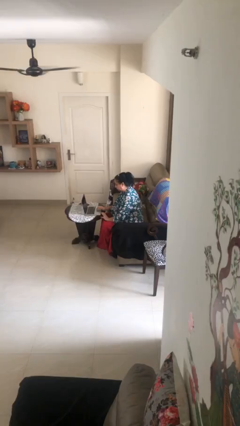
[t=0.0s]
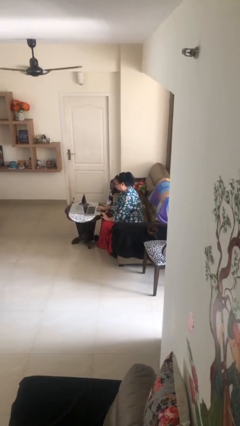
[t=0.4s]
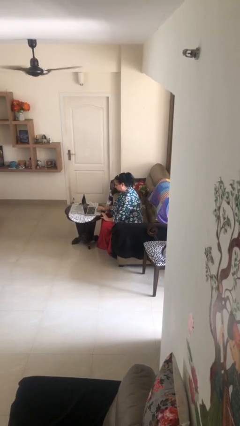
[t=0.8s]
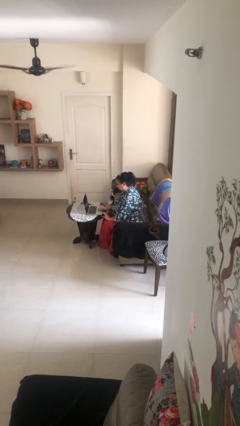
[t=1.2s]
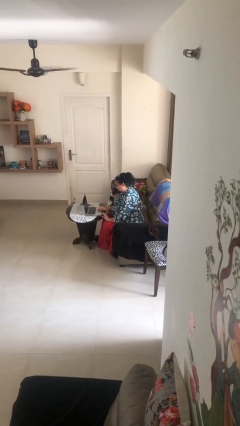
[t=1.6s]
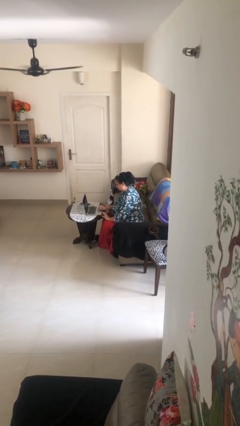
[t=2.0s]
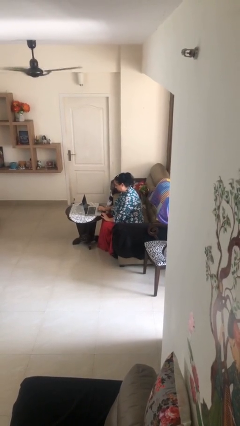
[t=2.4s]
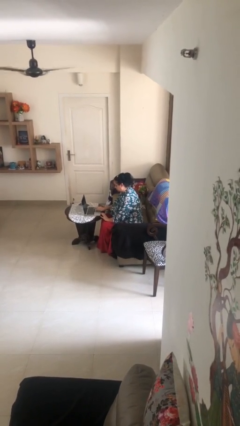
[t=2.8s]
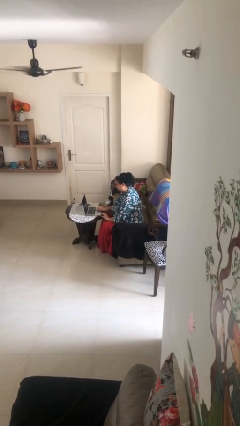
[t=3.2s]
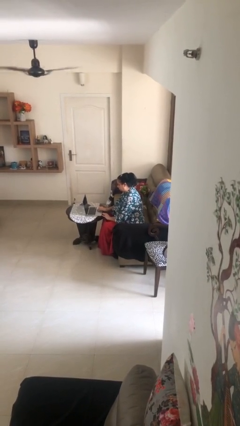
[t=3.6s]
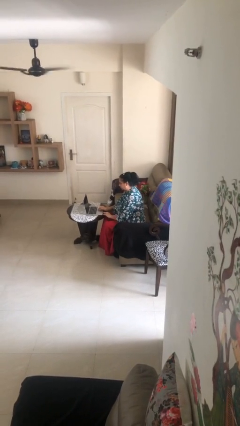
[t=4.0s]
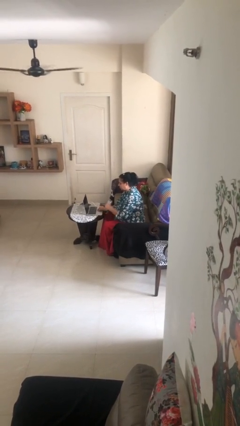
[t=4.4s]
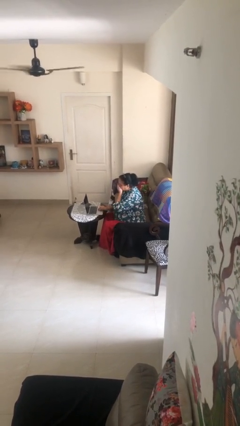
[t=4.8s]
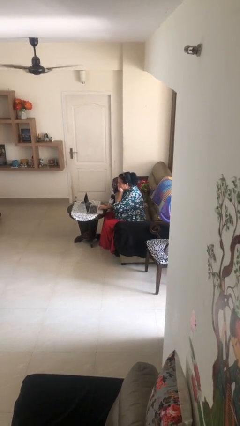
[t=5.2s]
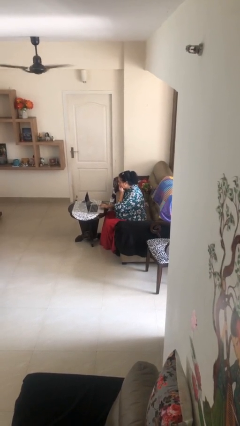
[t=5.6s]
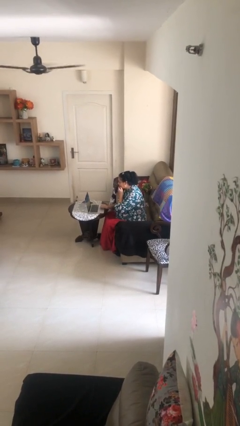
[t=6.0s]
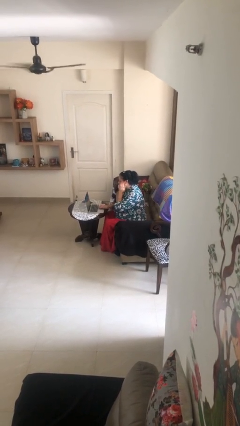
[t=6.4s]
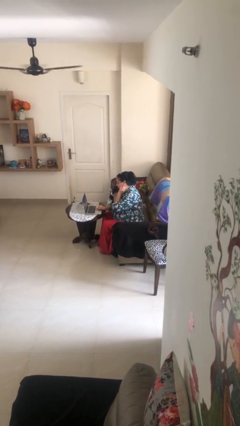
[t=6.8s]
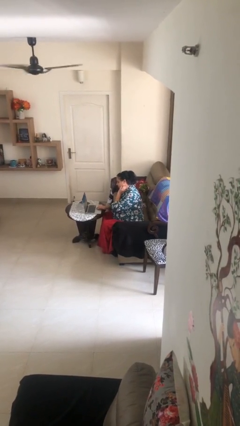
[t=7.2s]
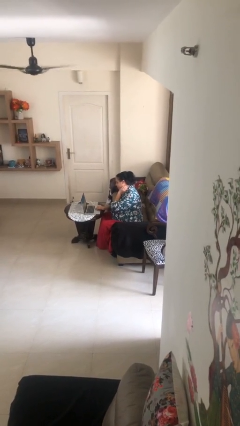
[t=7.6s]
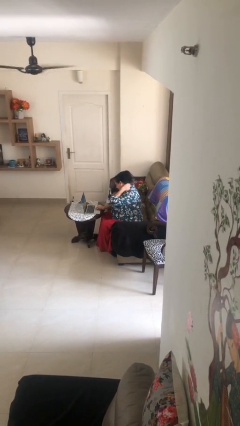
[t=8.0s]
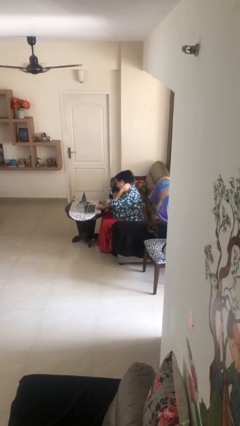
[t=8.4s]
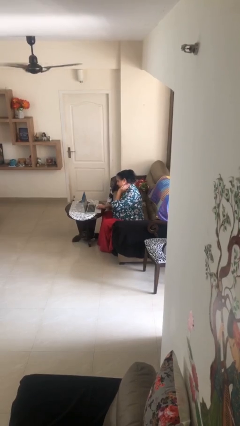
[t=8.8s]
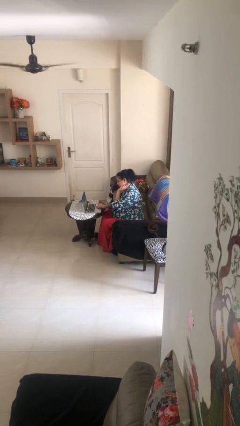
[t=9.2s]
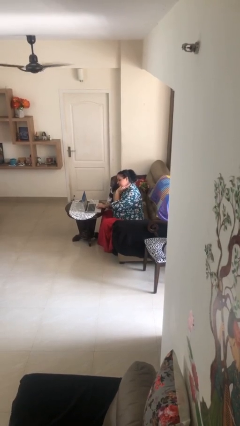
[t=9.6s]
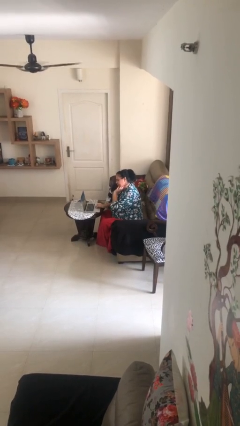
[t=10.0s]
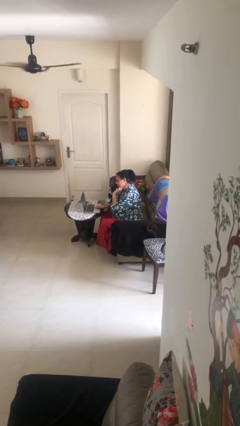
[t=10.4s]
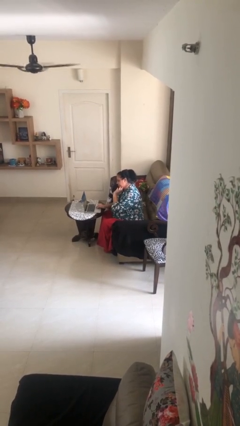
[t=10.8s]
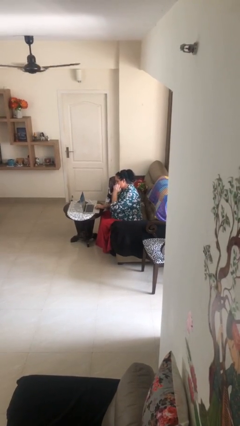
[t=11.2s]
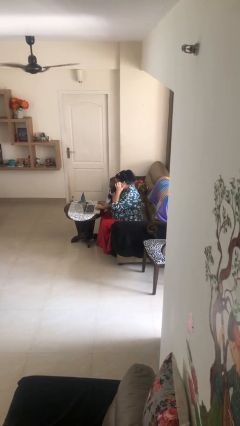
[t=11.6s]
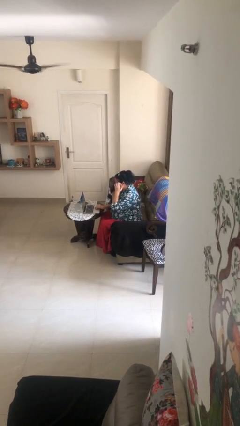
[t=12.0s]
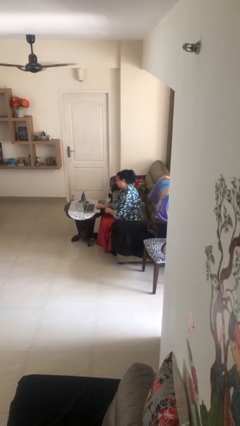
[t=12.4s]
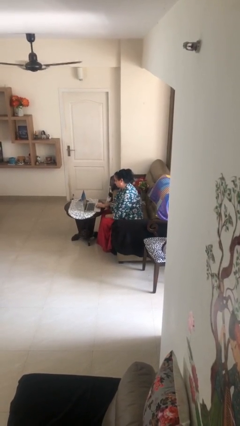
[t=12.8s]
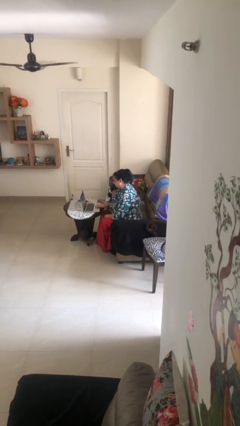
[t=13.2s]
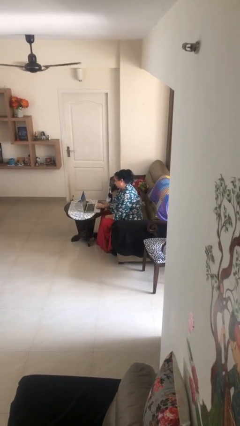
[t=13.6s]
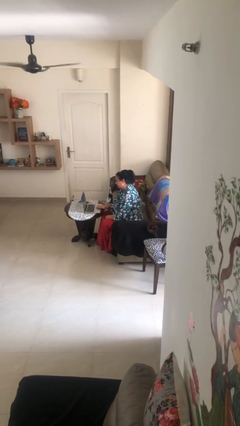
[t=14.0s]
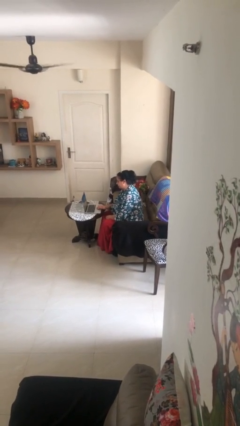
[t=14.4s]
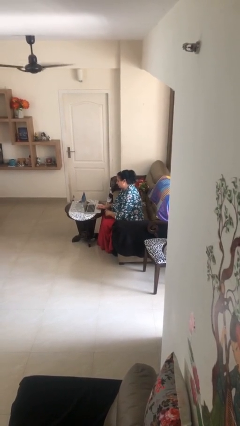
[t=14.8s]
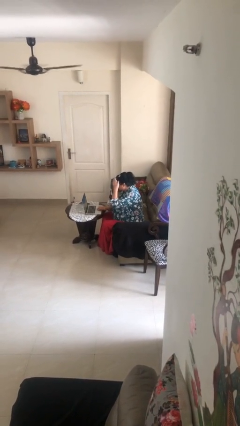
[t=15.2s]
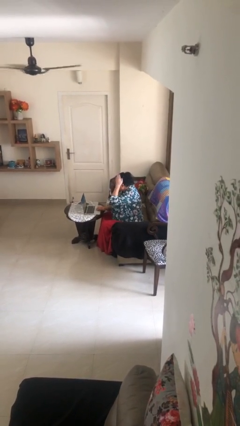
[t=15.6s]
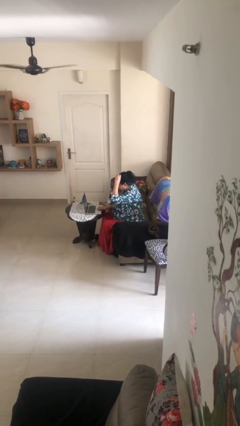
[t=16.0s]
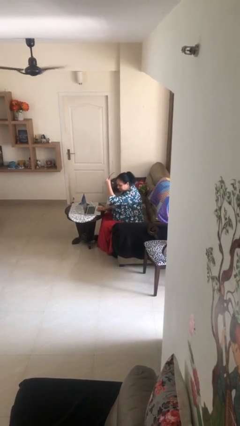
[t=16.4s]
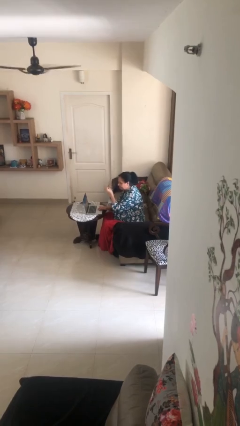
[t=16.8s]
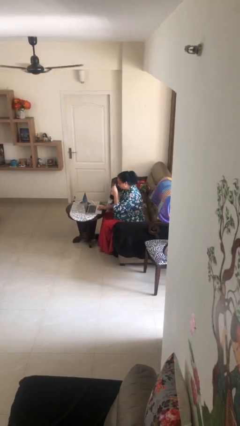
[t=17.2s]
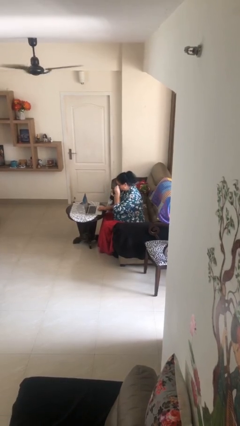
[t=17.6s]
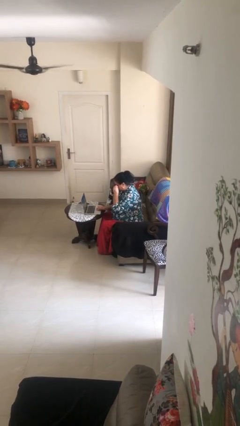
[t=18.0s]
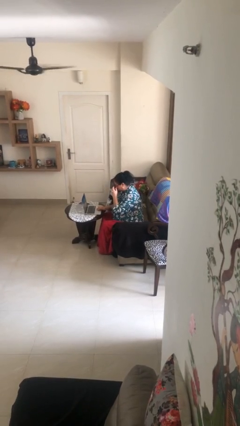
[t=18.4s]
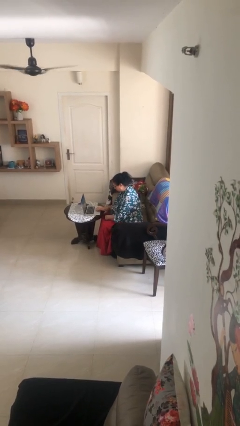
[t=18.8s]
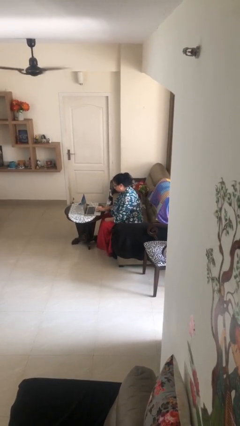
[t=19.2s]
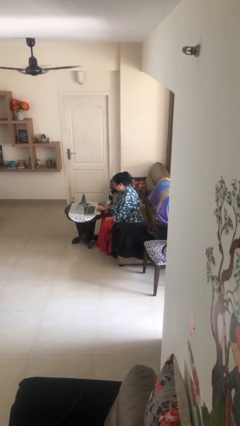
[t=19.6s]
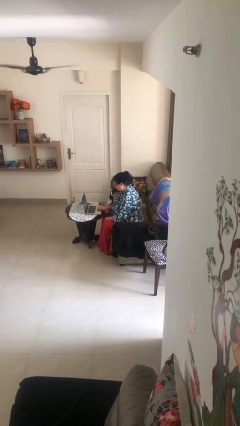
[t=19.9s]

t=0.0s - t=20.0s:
person interacts with laptop

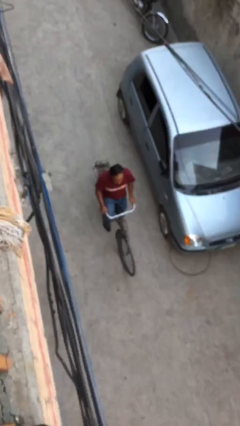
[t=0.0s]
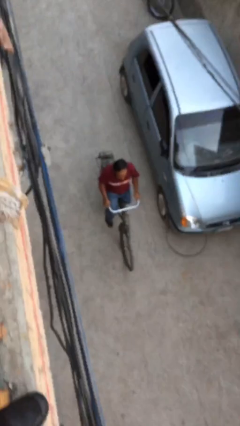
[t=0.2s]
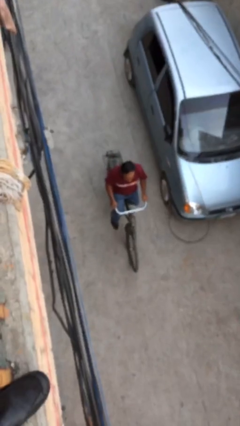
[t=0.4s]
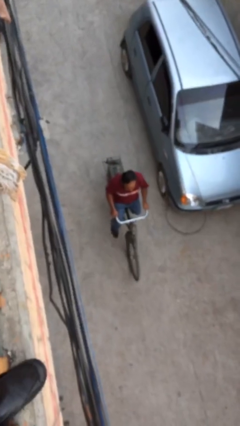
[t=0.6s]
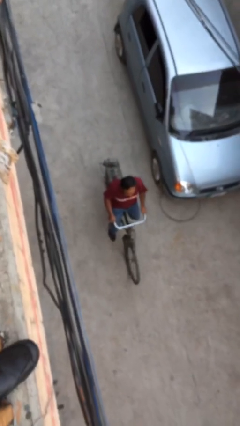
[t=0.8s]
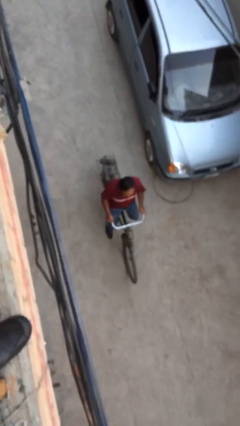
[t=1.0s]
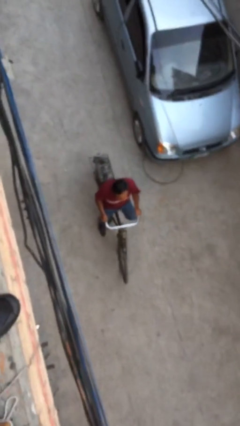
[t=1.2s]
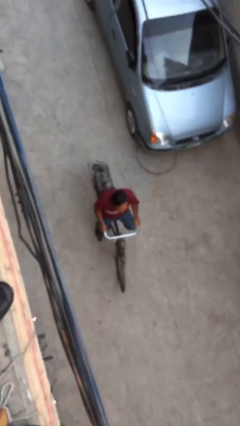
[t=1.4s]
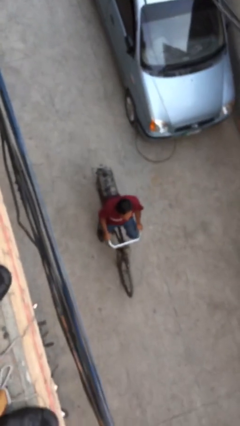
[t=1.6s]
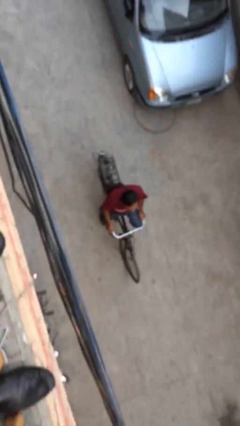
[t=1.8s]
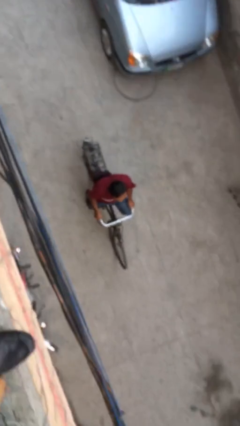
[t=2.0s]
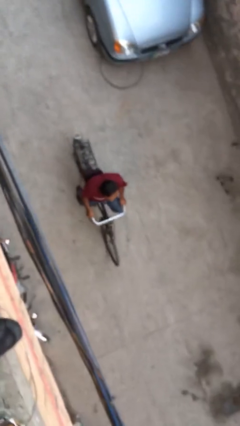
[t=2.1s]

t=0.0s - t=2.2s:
person rides bicycle

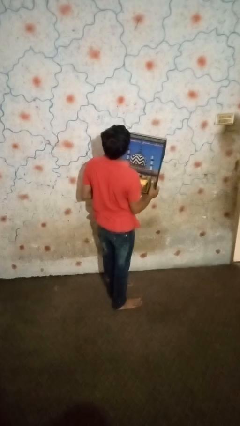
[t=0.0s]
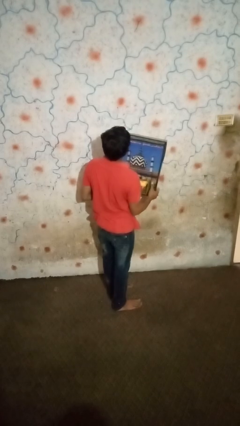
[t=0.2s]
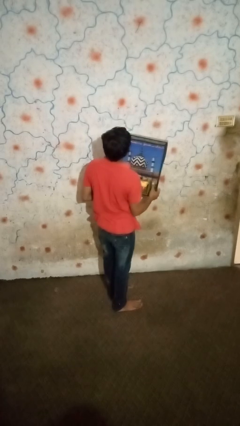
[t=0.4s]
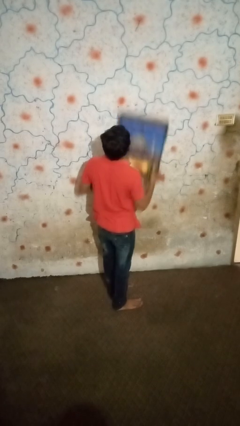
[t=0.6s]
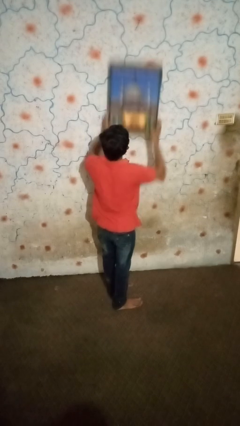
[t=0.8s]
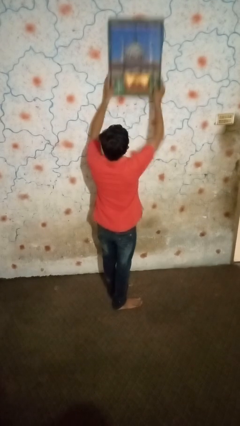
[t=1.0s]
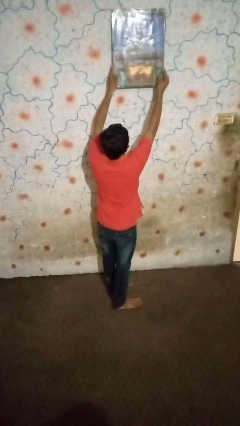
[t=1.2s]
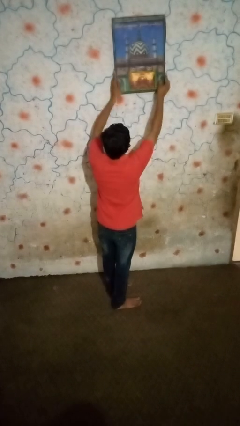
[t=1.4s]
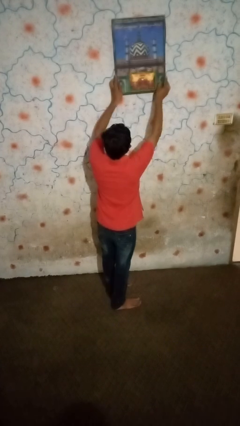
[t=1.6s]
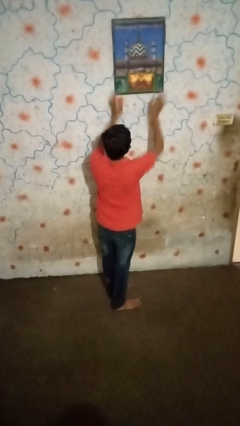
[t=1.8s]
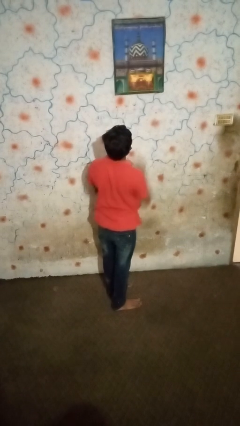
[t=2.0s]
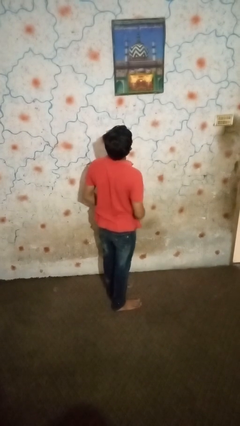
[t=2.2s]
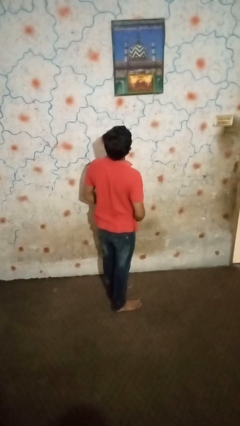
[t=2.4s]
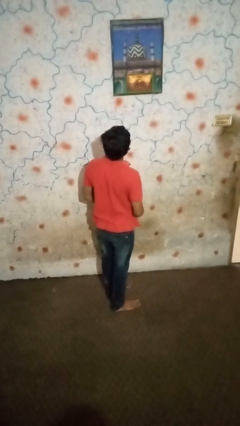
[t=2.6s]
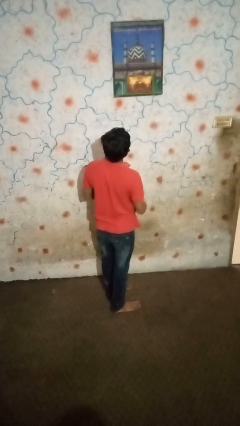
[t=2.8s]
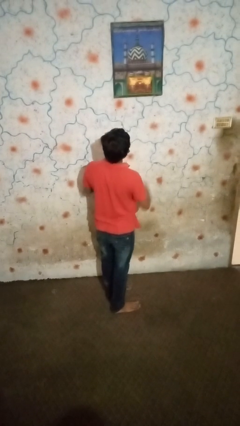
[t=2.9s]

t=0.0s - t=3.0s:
person puts up picture frame

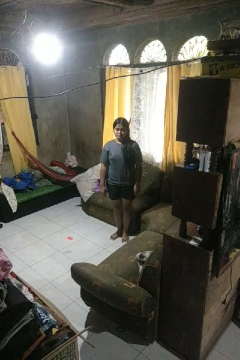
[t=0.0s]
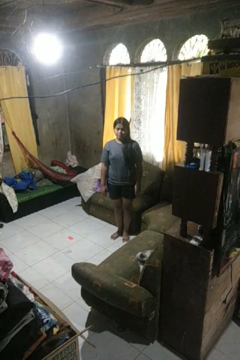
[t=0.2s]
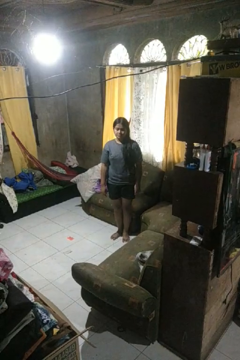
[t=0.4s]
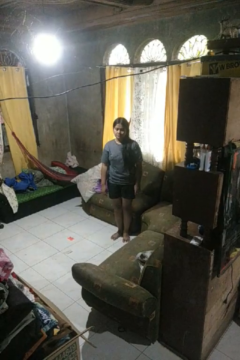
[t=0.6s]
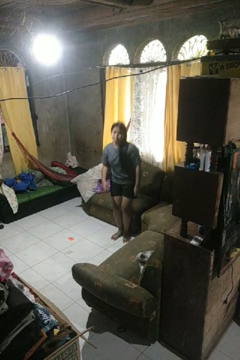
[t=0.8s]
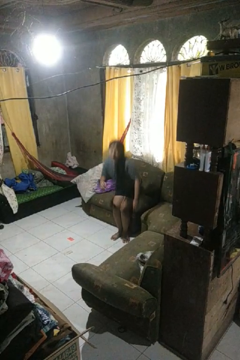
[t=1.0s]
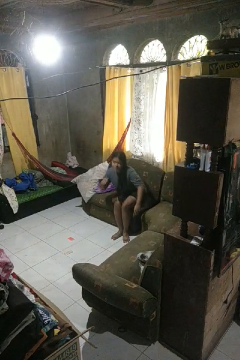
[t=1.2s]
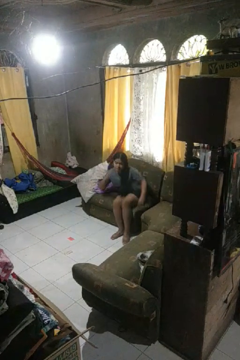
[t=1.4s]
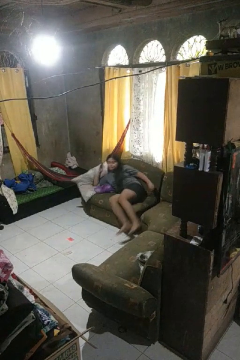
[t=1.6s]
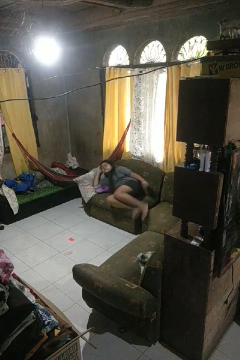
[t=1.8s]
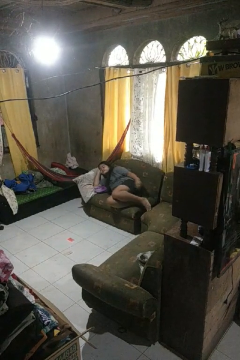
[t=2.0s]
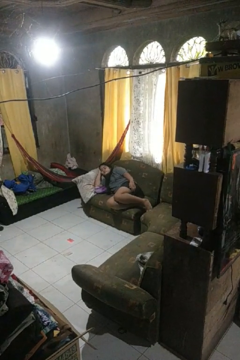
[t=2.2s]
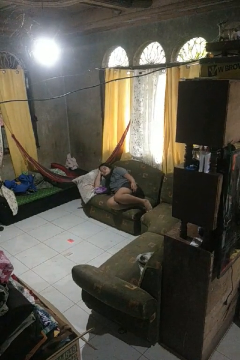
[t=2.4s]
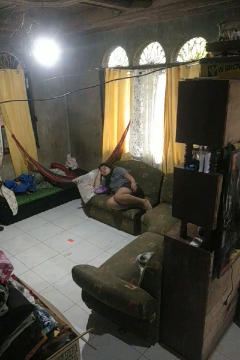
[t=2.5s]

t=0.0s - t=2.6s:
person lies down on couch

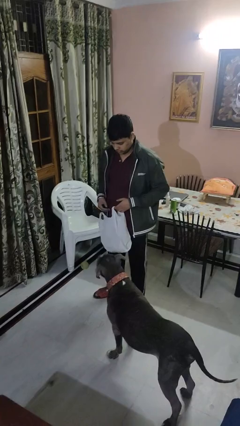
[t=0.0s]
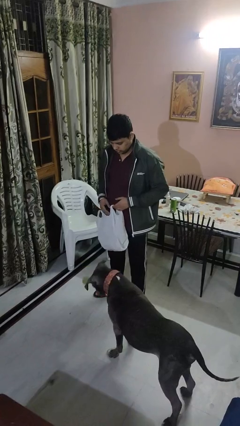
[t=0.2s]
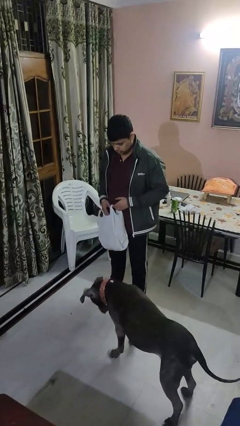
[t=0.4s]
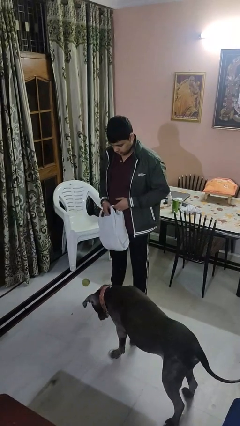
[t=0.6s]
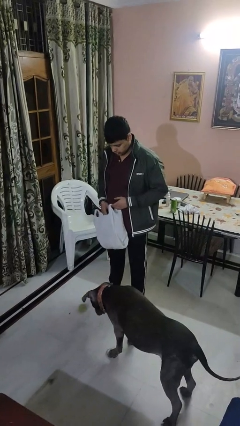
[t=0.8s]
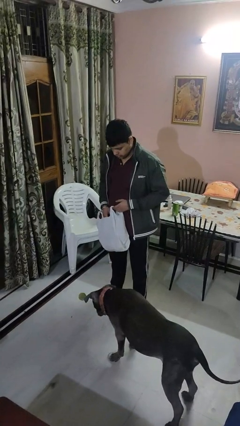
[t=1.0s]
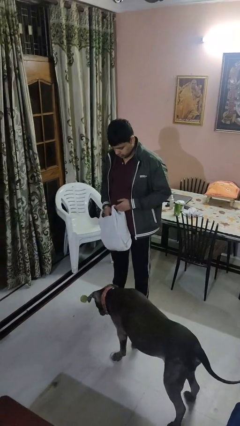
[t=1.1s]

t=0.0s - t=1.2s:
person throws object to dog
